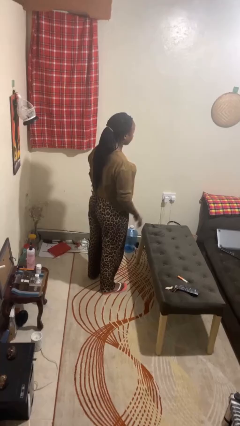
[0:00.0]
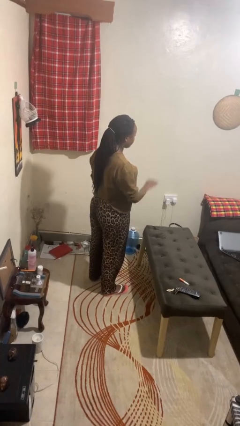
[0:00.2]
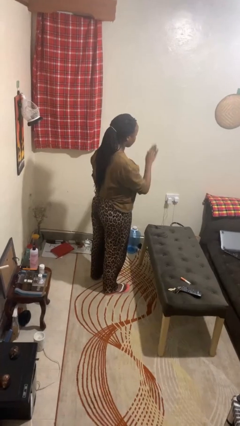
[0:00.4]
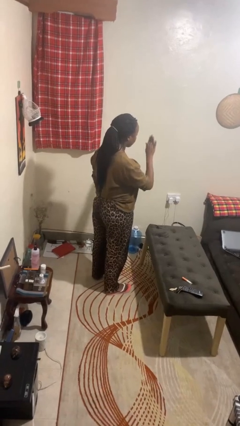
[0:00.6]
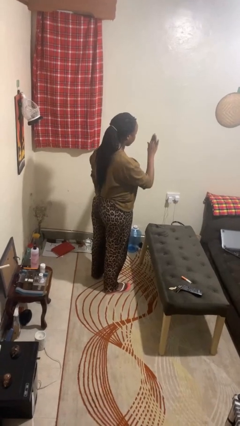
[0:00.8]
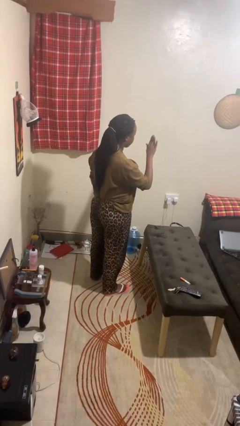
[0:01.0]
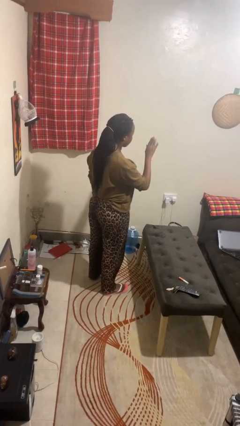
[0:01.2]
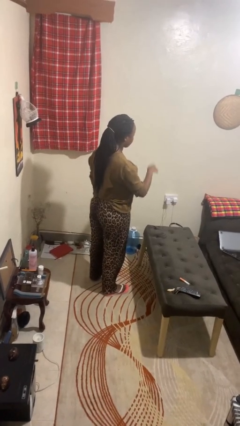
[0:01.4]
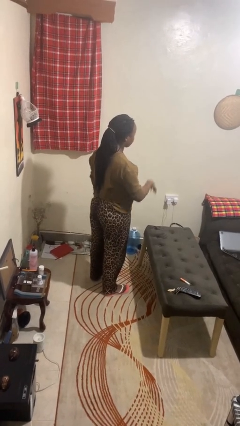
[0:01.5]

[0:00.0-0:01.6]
person gestures stop

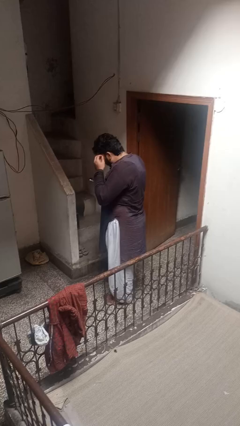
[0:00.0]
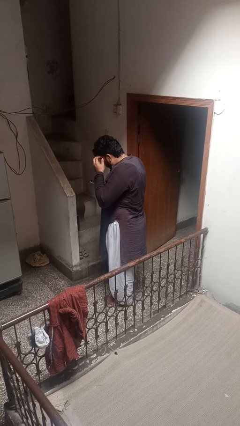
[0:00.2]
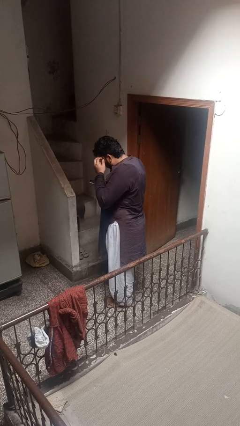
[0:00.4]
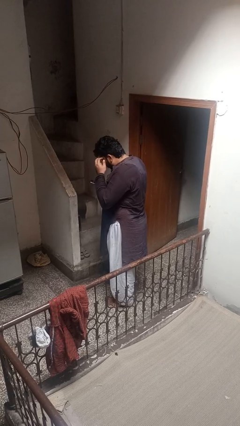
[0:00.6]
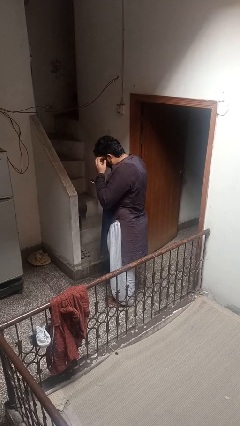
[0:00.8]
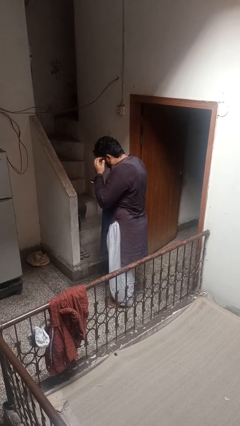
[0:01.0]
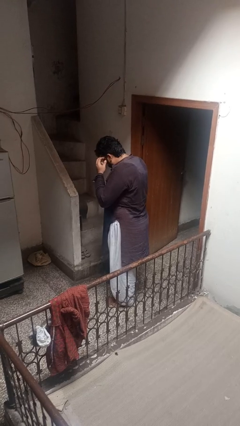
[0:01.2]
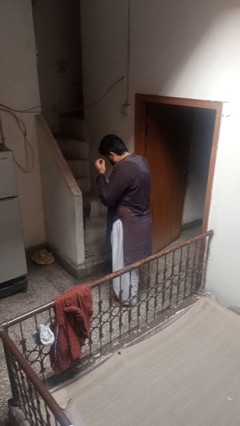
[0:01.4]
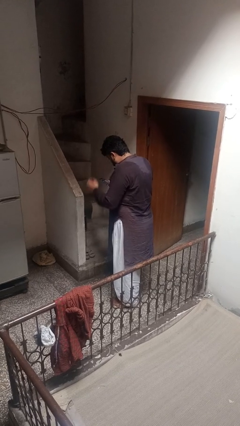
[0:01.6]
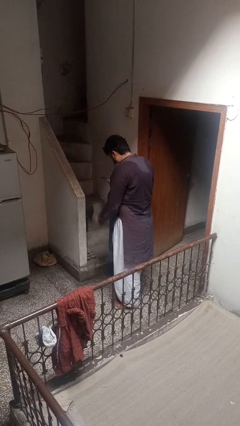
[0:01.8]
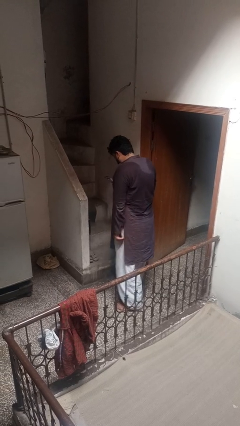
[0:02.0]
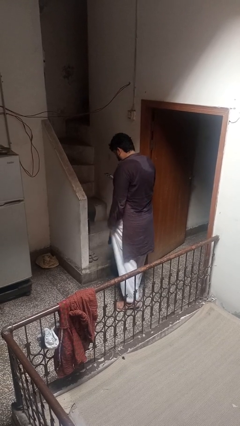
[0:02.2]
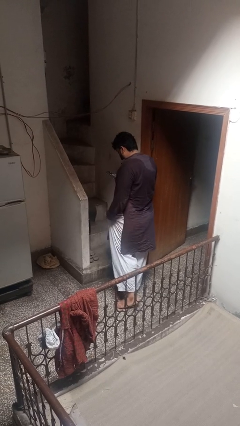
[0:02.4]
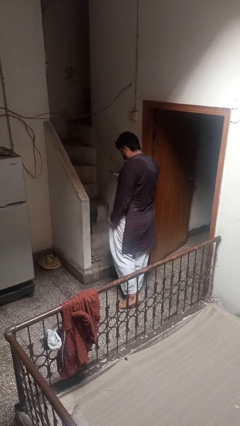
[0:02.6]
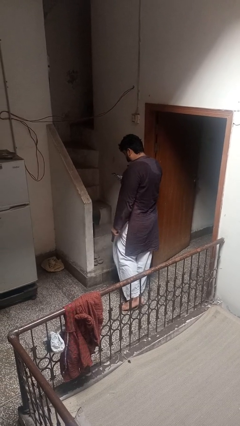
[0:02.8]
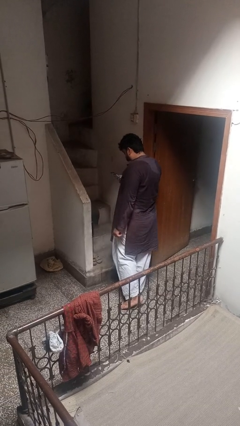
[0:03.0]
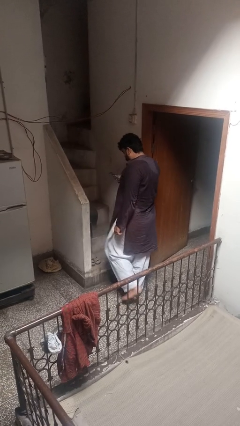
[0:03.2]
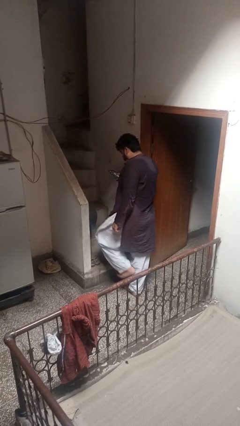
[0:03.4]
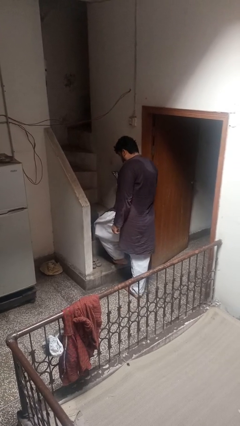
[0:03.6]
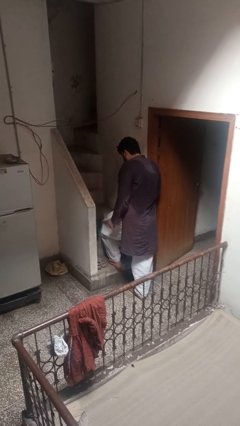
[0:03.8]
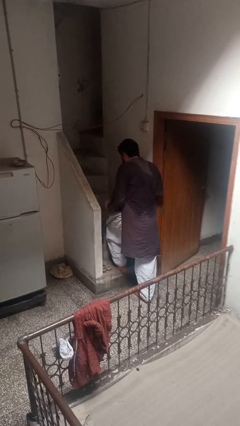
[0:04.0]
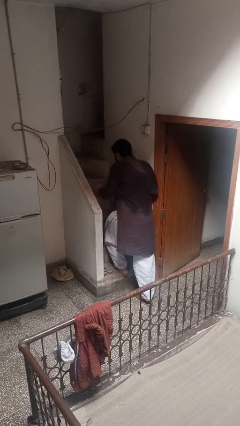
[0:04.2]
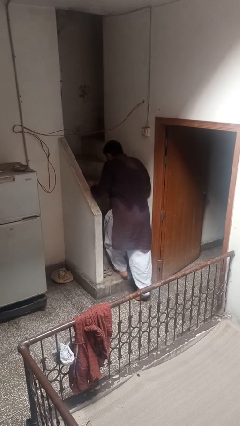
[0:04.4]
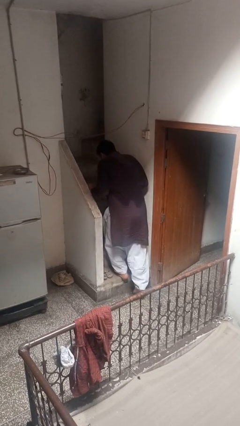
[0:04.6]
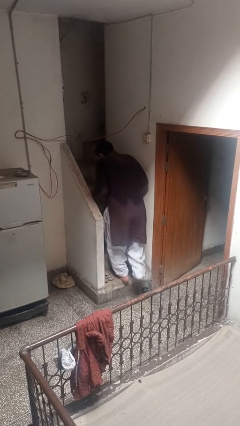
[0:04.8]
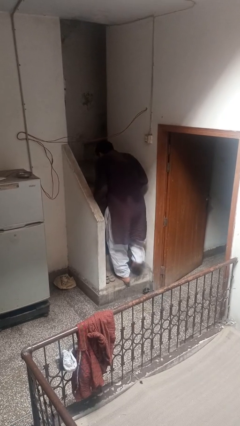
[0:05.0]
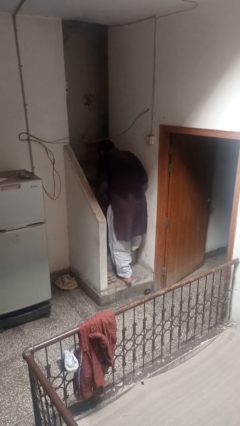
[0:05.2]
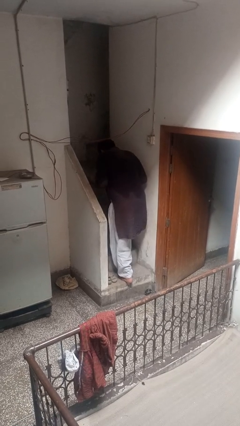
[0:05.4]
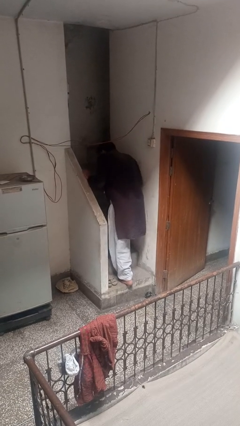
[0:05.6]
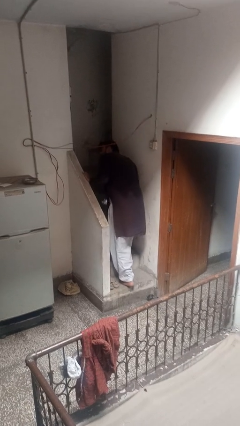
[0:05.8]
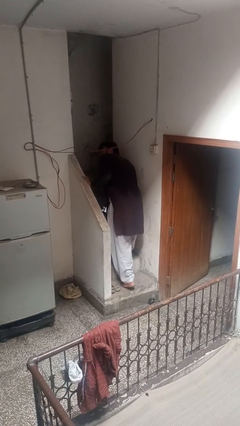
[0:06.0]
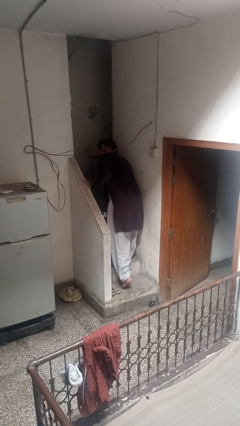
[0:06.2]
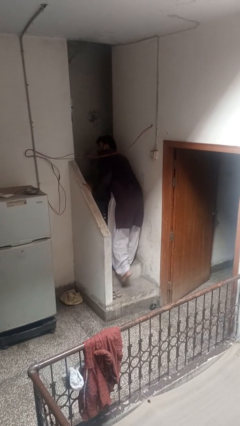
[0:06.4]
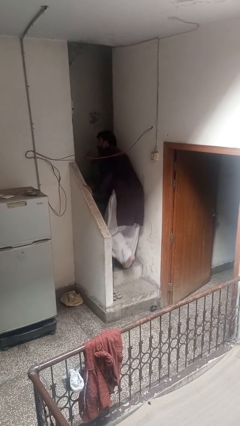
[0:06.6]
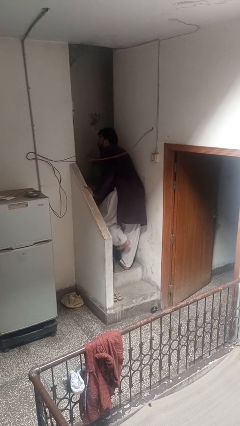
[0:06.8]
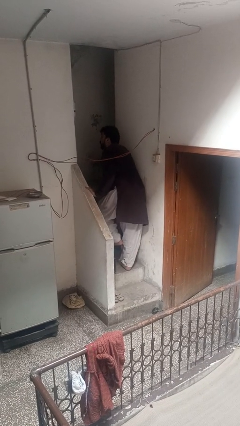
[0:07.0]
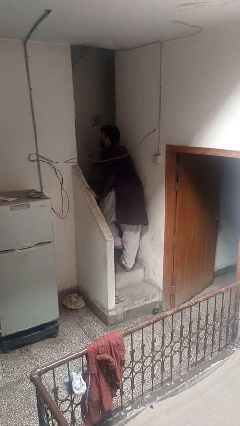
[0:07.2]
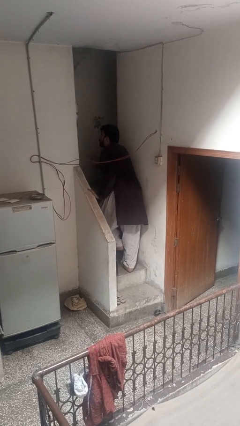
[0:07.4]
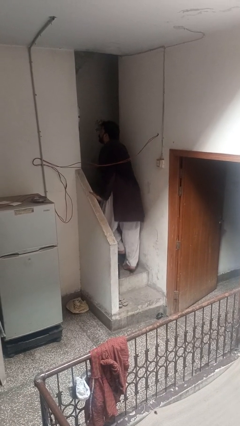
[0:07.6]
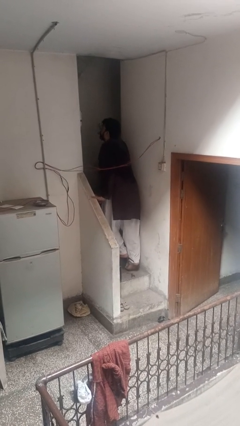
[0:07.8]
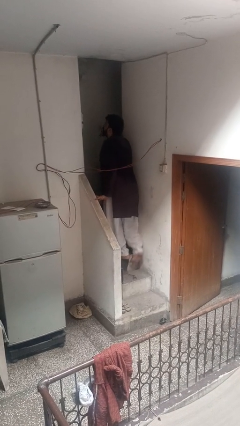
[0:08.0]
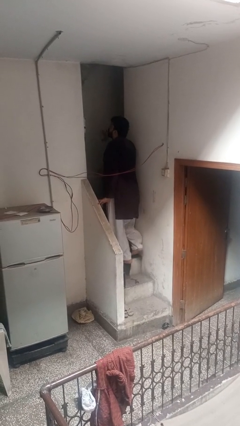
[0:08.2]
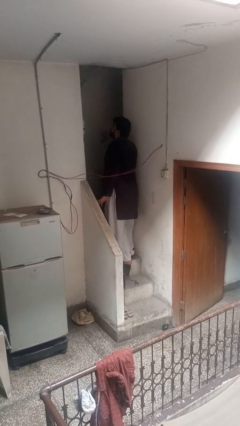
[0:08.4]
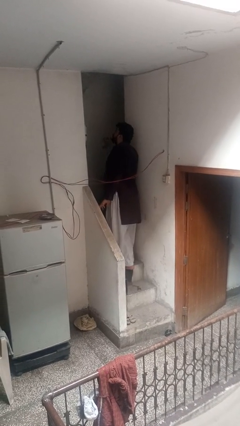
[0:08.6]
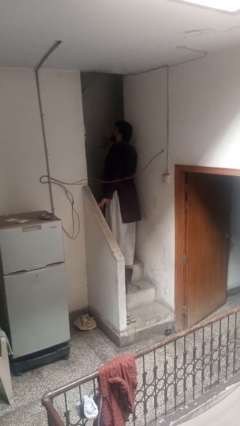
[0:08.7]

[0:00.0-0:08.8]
person climbs up stairs

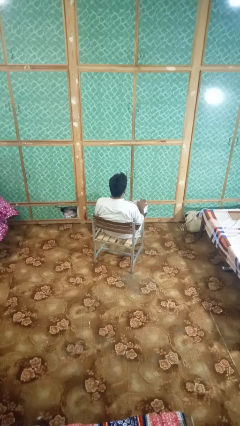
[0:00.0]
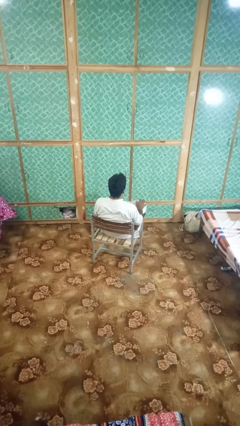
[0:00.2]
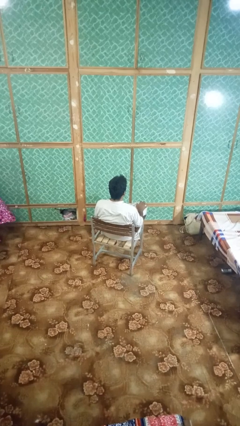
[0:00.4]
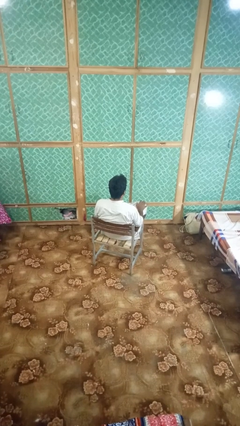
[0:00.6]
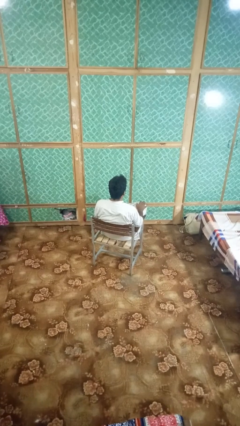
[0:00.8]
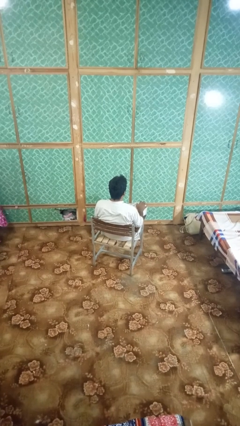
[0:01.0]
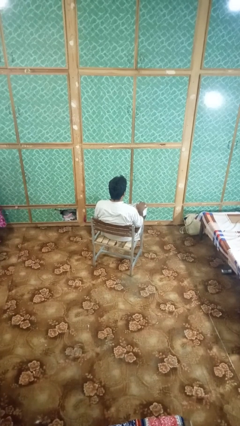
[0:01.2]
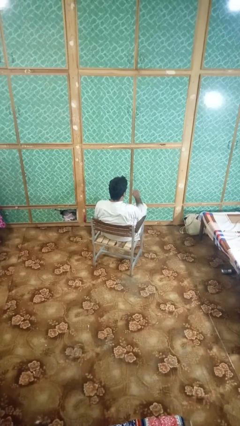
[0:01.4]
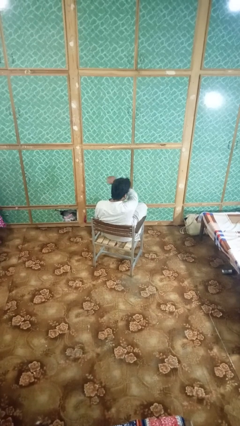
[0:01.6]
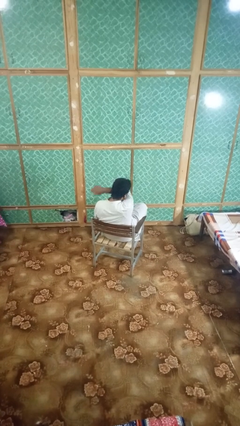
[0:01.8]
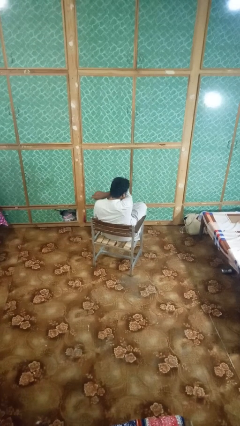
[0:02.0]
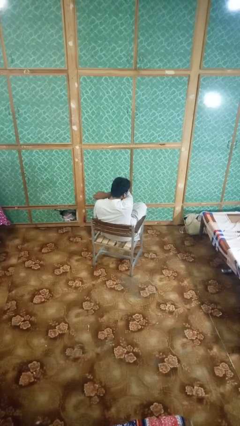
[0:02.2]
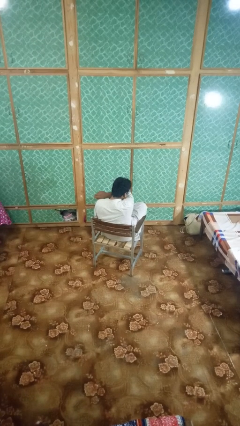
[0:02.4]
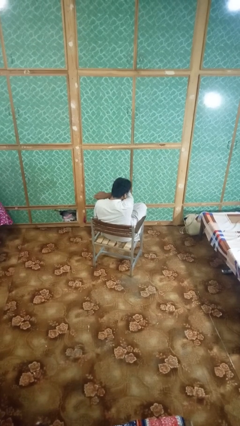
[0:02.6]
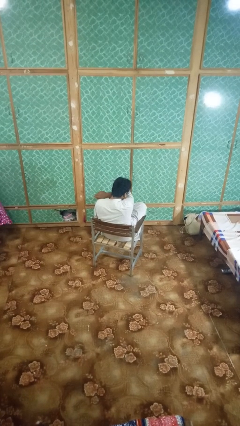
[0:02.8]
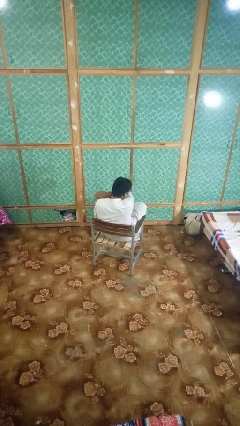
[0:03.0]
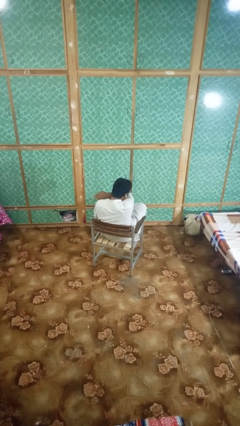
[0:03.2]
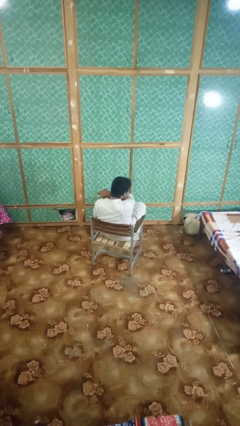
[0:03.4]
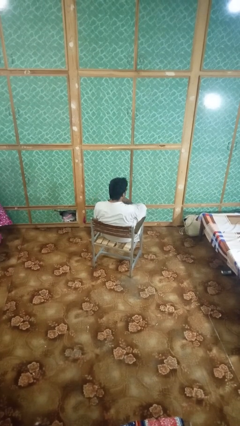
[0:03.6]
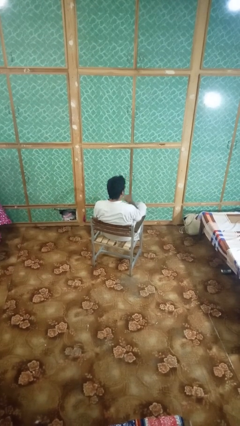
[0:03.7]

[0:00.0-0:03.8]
person sneezes into arm

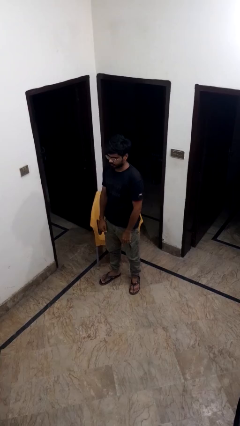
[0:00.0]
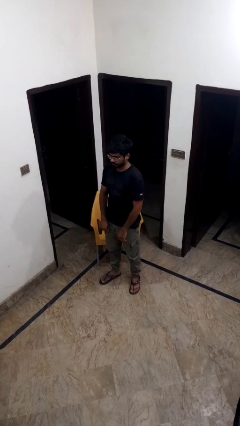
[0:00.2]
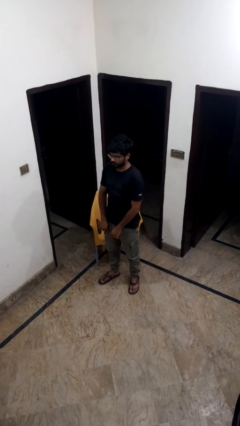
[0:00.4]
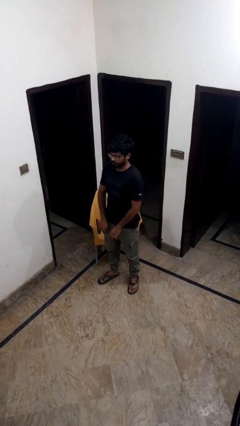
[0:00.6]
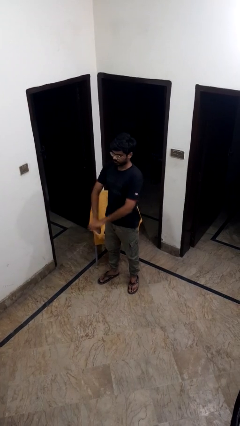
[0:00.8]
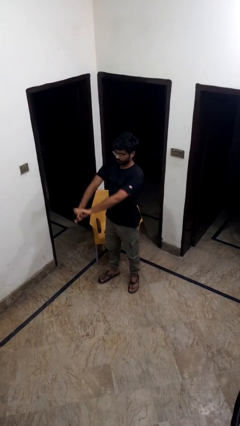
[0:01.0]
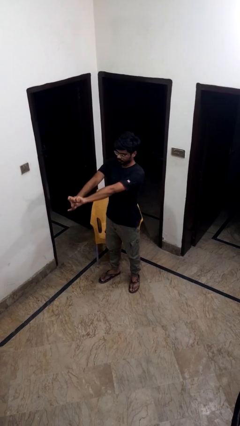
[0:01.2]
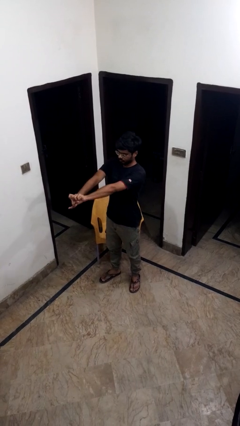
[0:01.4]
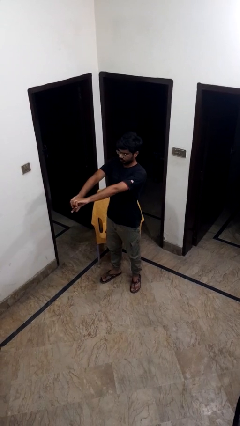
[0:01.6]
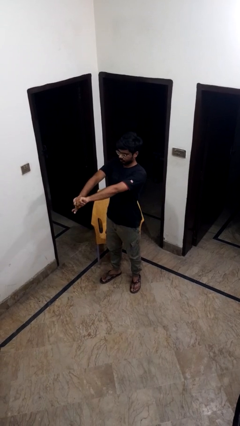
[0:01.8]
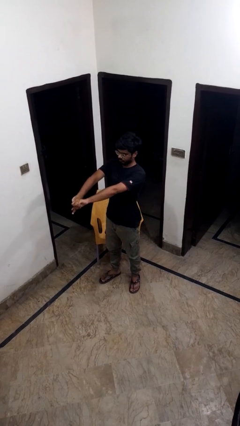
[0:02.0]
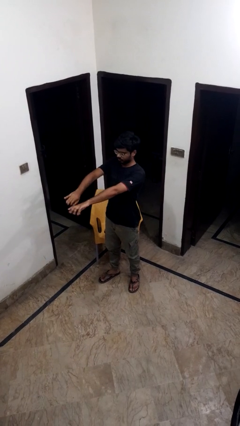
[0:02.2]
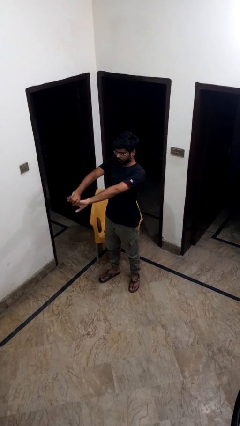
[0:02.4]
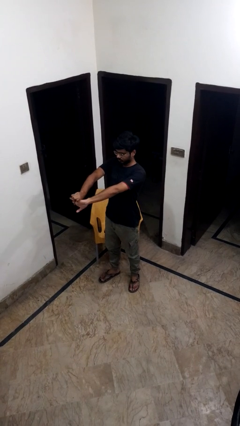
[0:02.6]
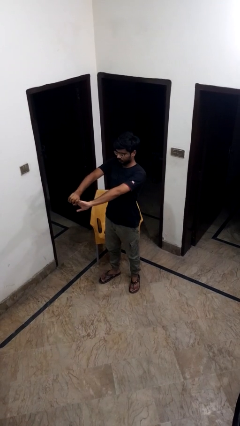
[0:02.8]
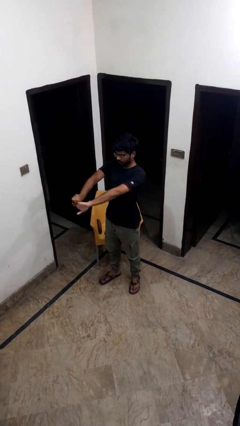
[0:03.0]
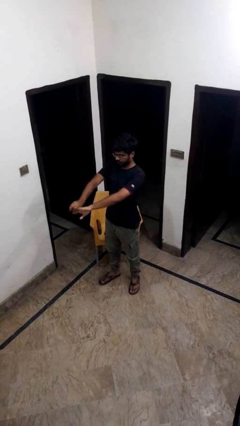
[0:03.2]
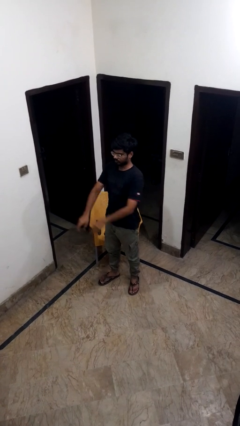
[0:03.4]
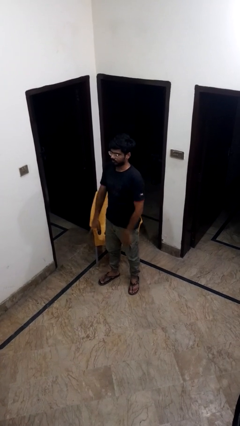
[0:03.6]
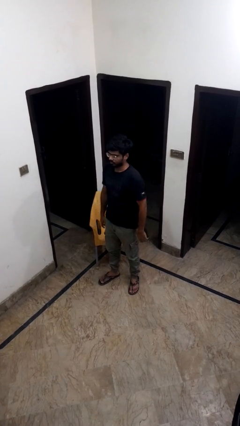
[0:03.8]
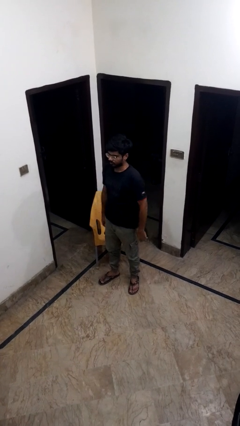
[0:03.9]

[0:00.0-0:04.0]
person cracks knuckles
